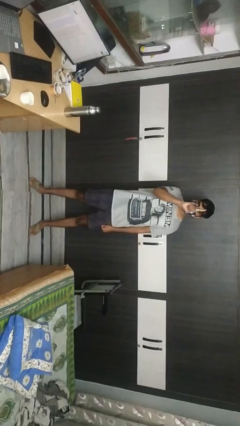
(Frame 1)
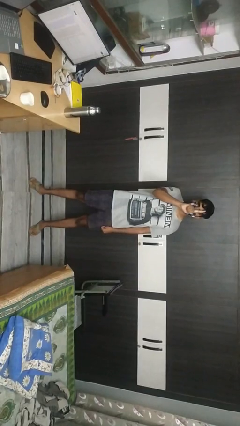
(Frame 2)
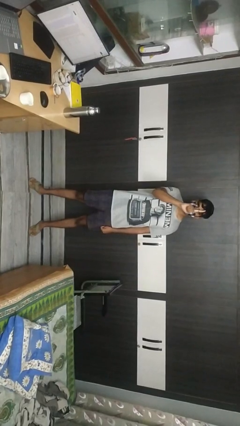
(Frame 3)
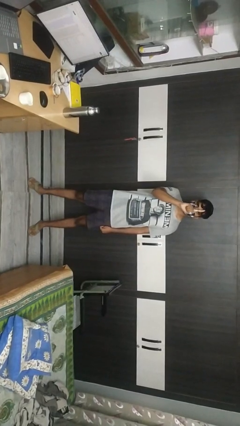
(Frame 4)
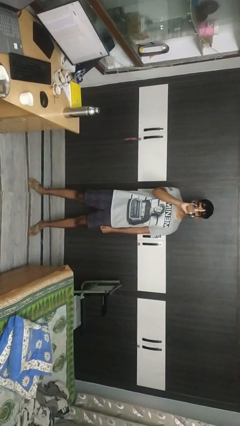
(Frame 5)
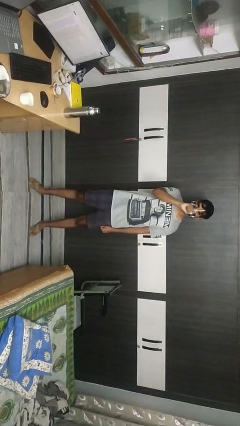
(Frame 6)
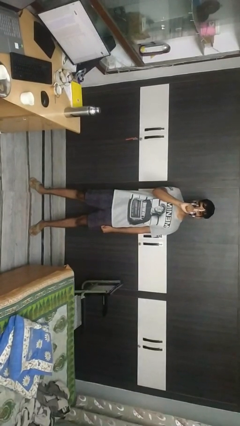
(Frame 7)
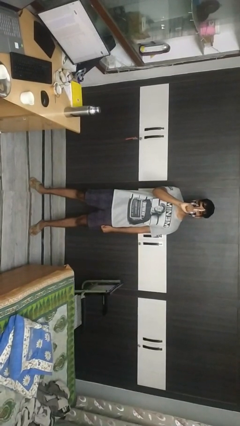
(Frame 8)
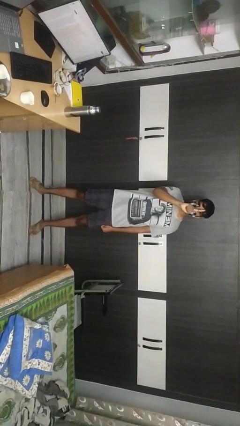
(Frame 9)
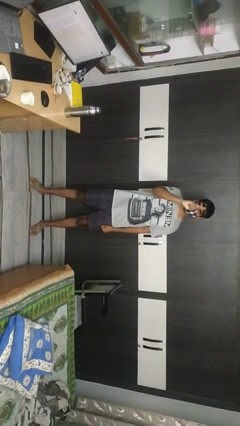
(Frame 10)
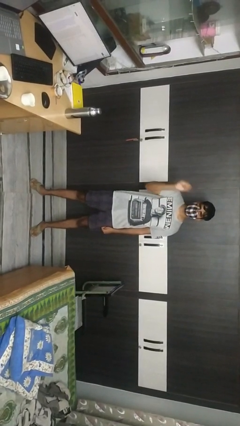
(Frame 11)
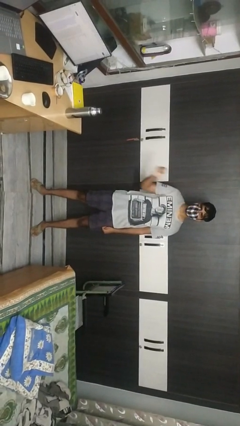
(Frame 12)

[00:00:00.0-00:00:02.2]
person gestures number one

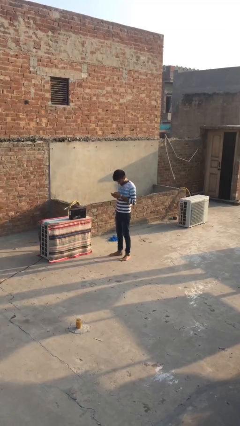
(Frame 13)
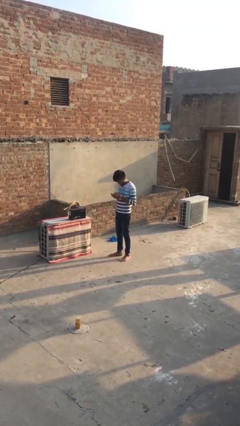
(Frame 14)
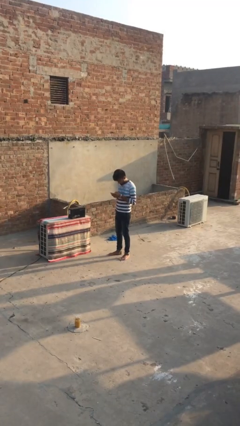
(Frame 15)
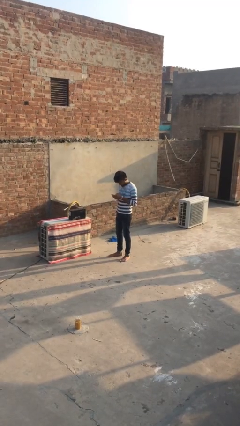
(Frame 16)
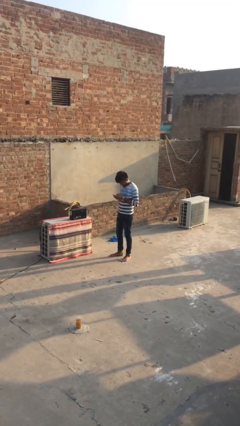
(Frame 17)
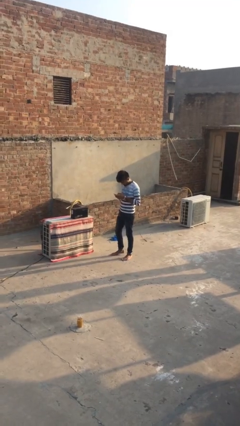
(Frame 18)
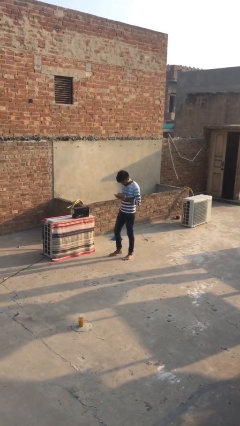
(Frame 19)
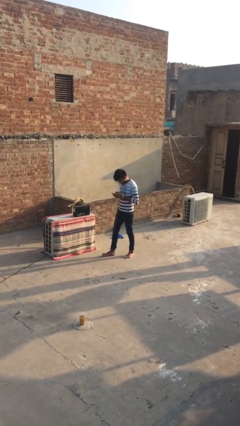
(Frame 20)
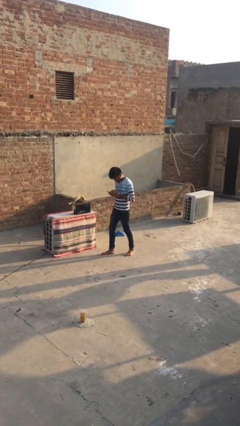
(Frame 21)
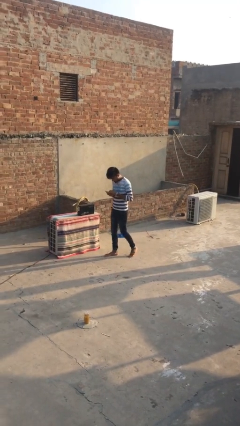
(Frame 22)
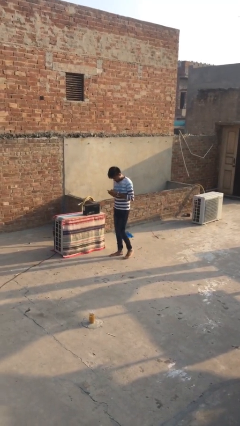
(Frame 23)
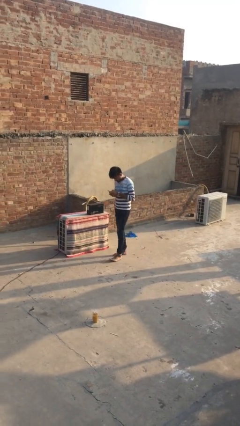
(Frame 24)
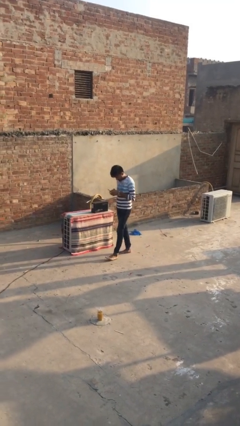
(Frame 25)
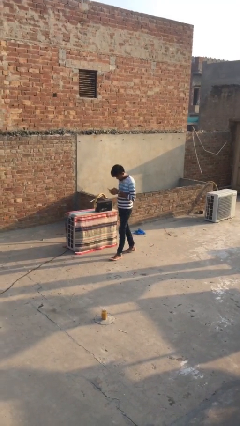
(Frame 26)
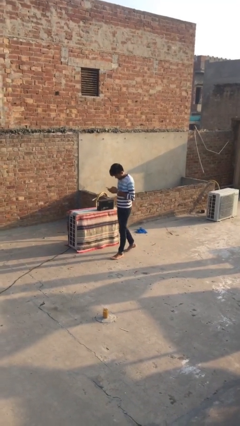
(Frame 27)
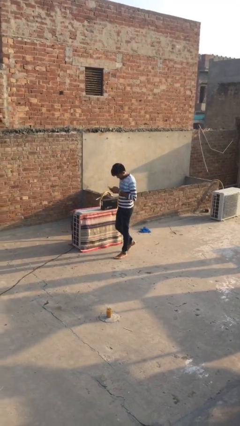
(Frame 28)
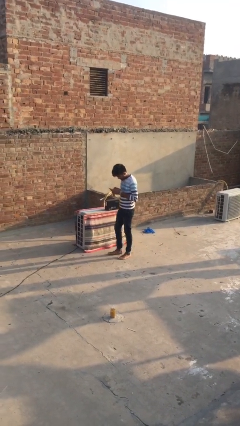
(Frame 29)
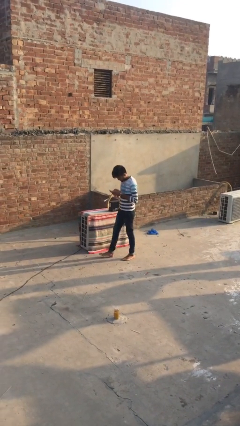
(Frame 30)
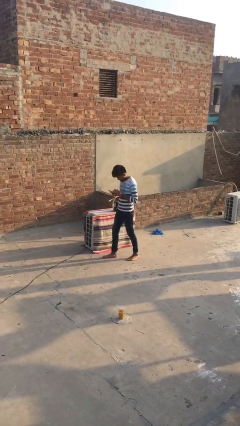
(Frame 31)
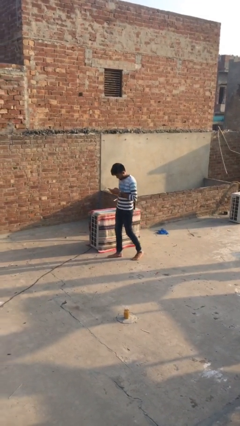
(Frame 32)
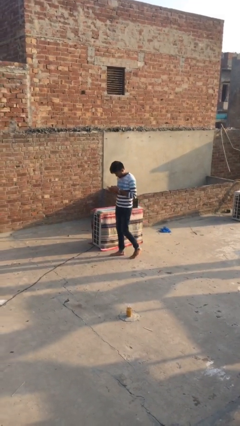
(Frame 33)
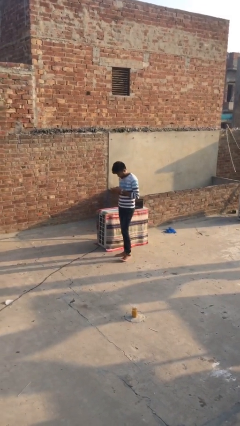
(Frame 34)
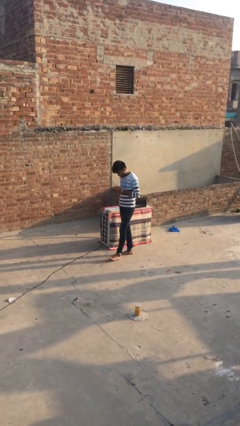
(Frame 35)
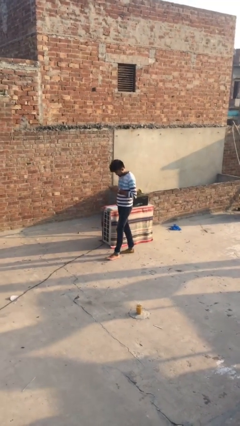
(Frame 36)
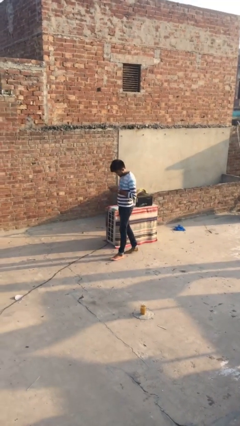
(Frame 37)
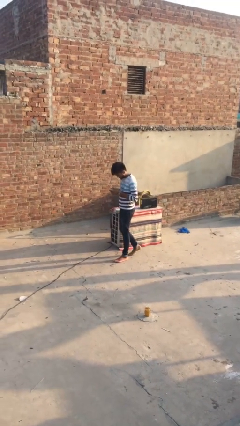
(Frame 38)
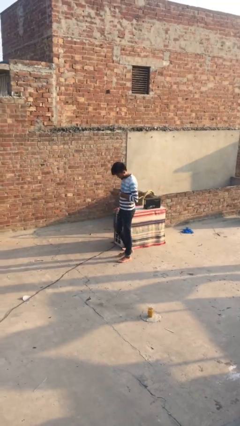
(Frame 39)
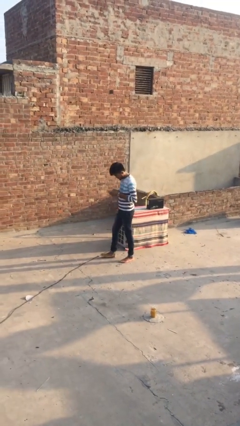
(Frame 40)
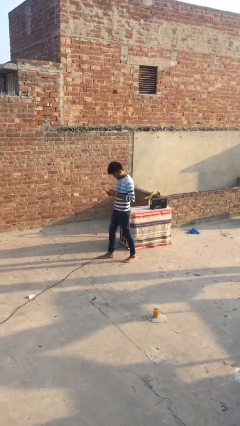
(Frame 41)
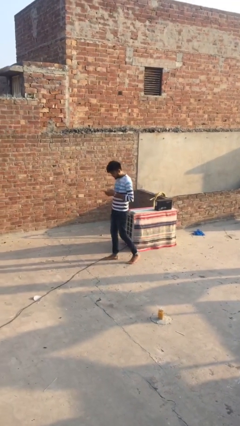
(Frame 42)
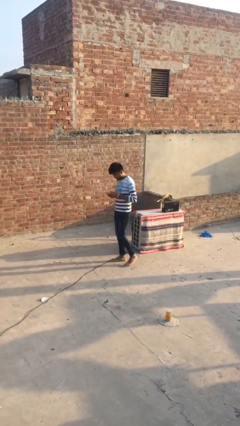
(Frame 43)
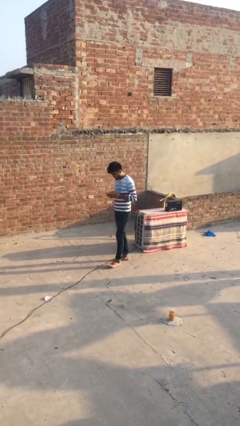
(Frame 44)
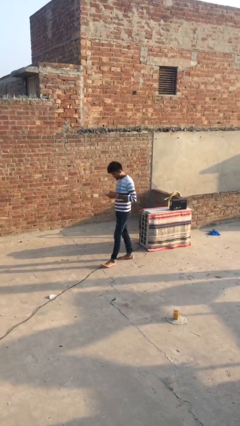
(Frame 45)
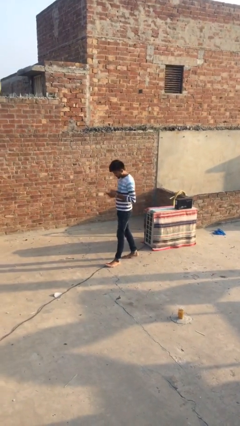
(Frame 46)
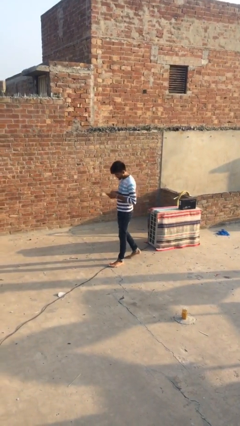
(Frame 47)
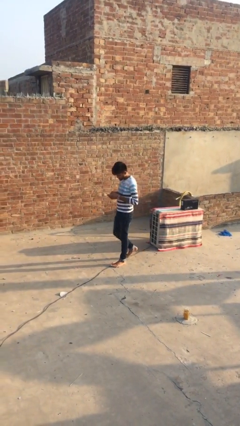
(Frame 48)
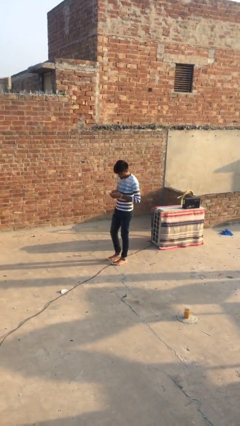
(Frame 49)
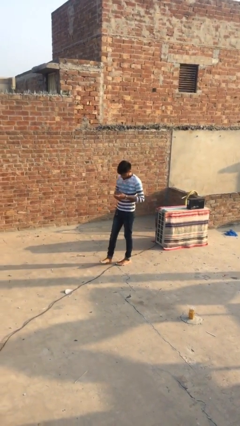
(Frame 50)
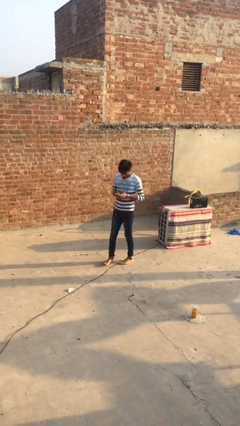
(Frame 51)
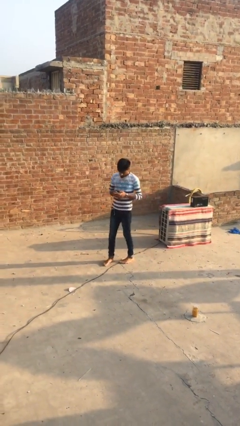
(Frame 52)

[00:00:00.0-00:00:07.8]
person texts on phone

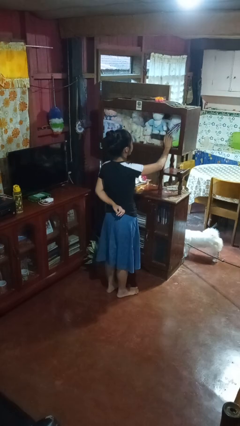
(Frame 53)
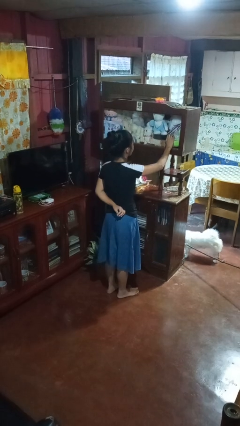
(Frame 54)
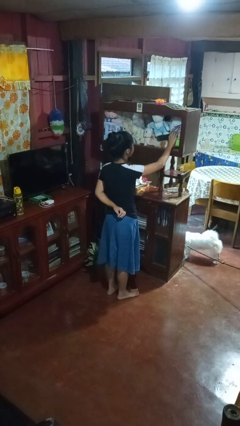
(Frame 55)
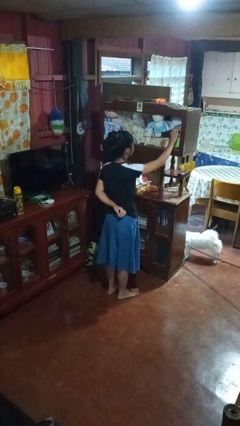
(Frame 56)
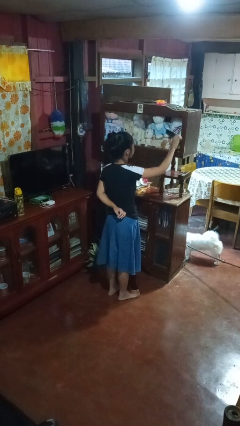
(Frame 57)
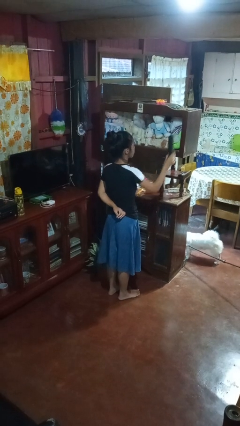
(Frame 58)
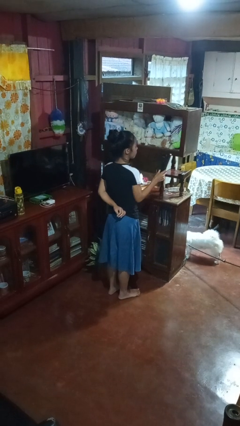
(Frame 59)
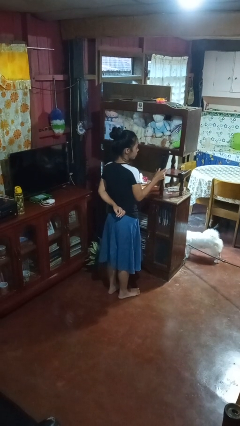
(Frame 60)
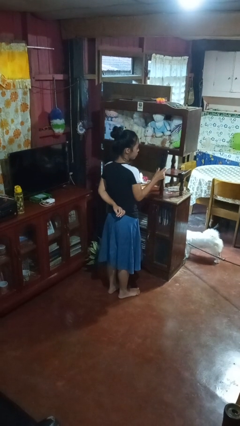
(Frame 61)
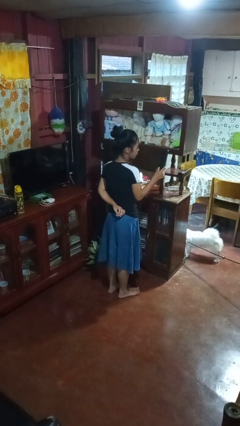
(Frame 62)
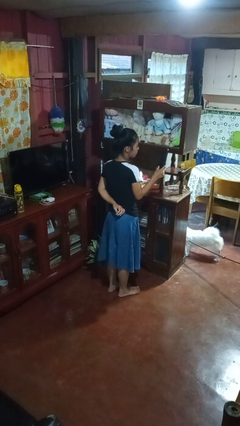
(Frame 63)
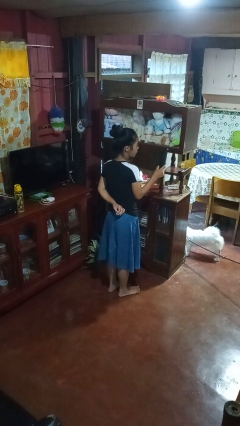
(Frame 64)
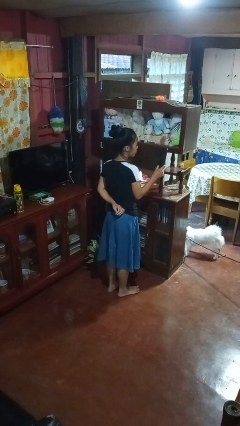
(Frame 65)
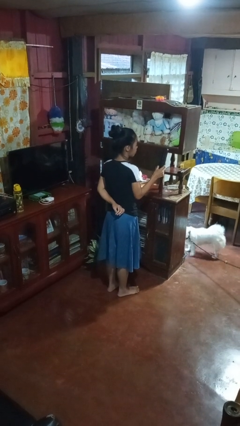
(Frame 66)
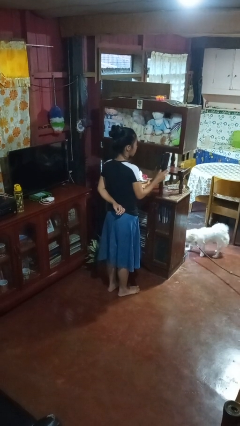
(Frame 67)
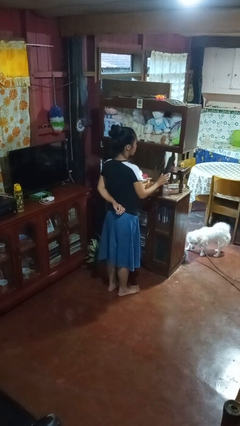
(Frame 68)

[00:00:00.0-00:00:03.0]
person picks up object from shelf

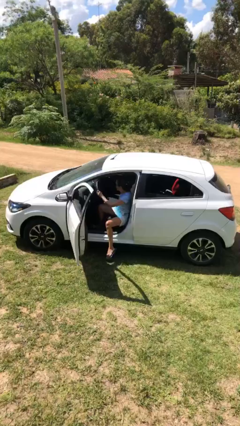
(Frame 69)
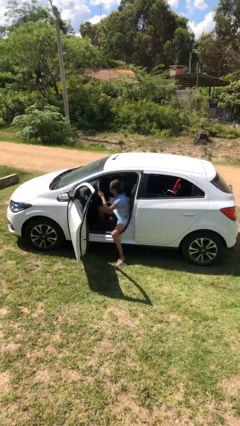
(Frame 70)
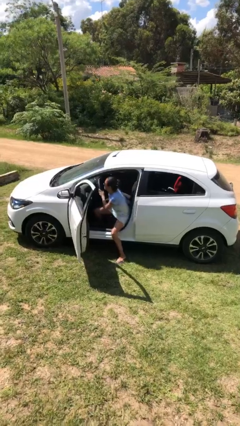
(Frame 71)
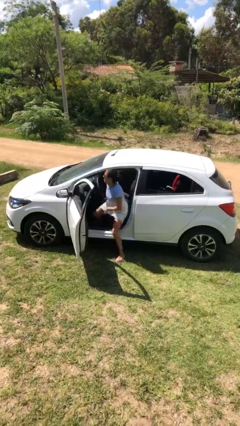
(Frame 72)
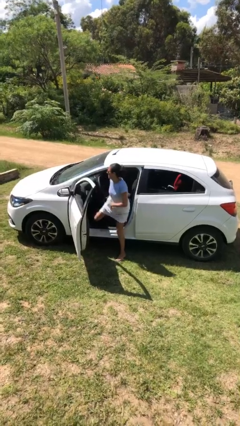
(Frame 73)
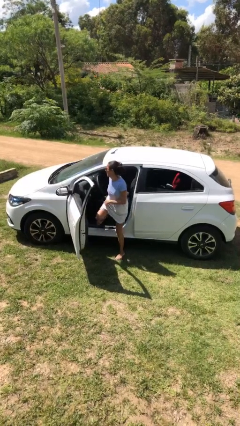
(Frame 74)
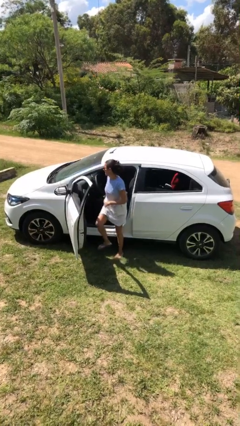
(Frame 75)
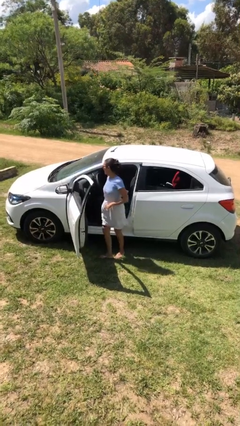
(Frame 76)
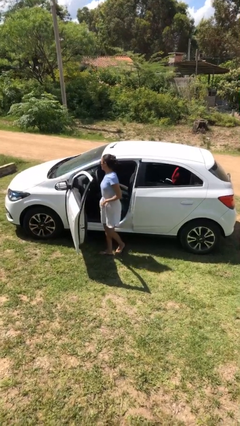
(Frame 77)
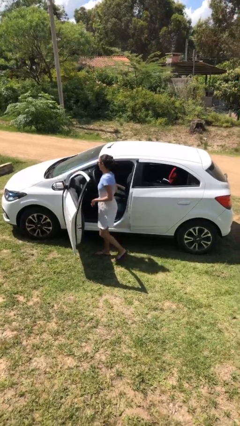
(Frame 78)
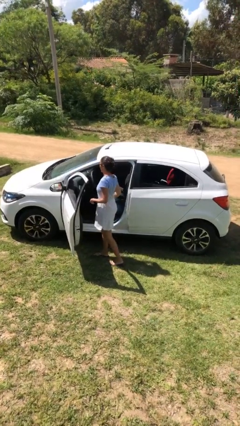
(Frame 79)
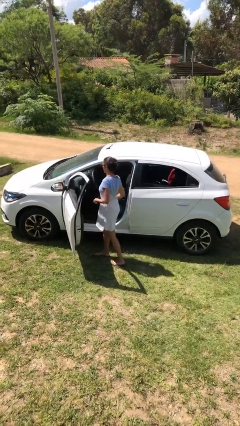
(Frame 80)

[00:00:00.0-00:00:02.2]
person exits car

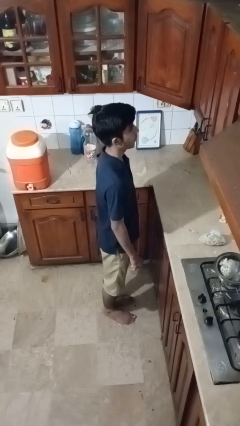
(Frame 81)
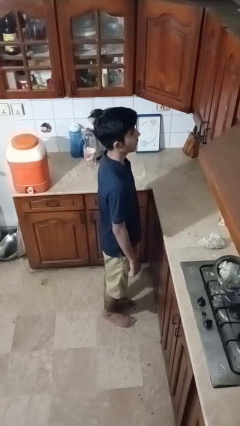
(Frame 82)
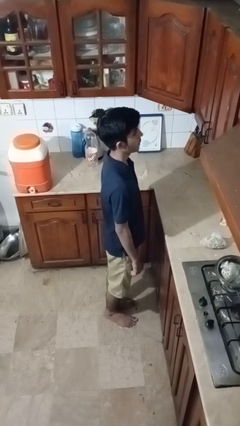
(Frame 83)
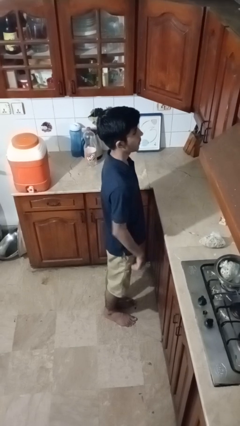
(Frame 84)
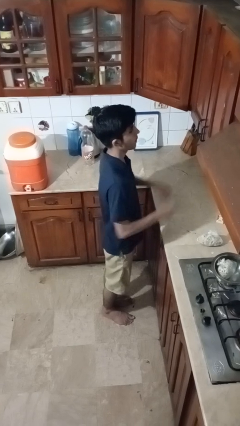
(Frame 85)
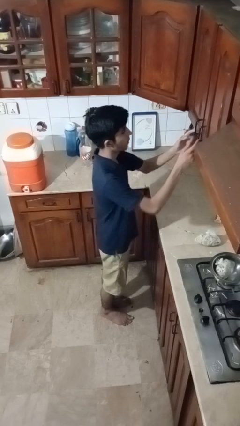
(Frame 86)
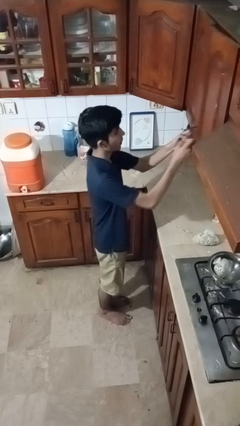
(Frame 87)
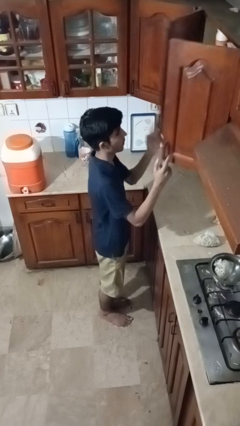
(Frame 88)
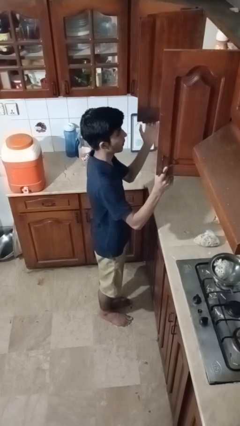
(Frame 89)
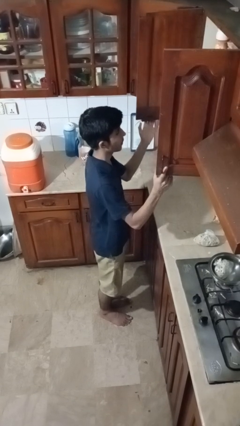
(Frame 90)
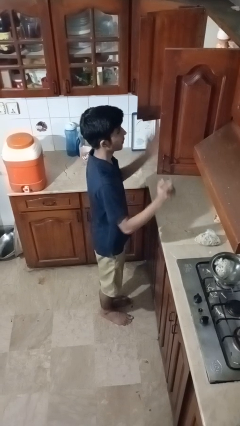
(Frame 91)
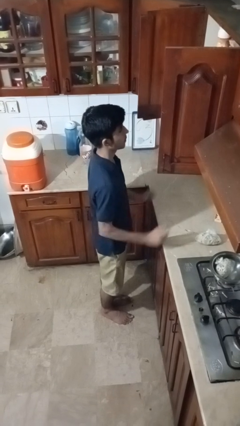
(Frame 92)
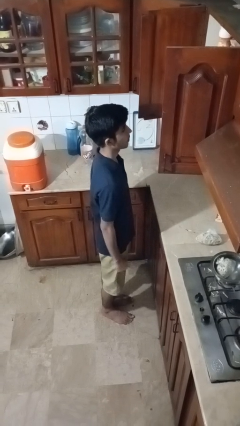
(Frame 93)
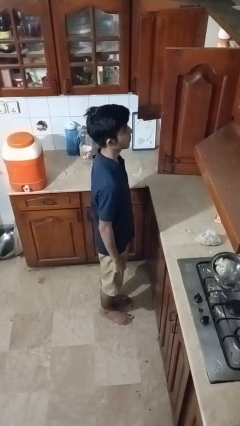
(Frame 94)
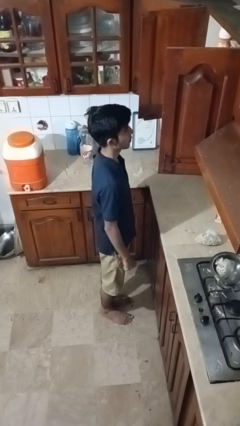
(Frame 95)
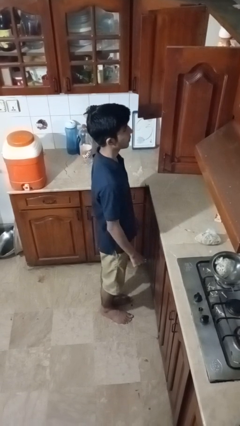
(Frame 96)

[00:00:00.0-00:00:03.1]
person opens cabinet
